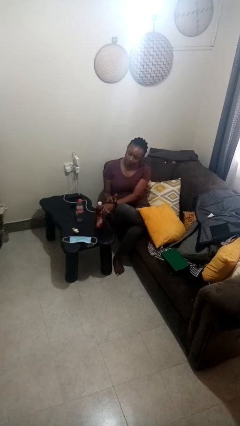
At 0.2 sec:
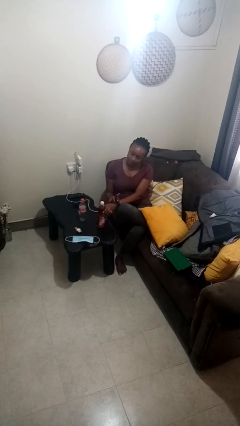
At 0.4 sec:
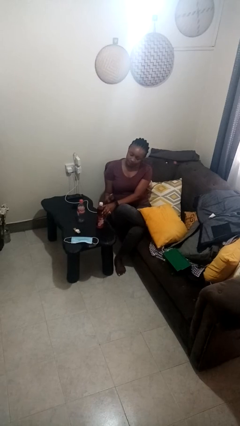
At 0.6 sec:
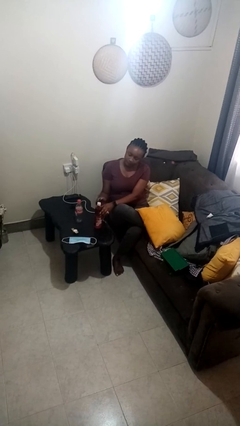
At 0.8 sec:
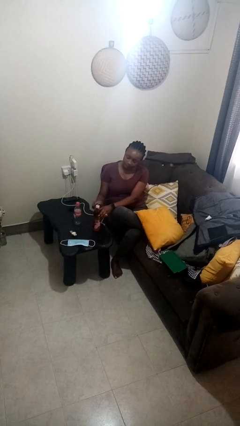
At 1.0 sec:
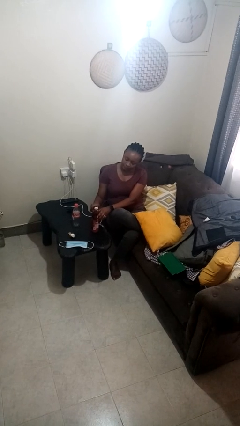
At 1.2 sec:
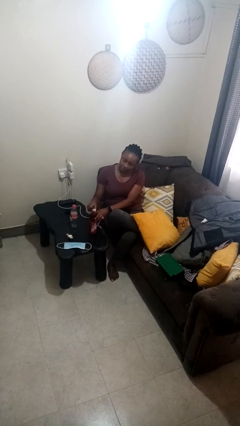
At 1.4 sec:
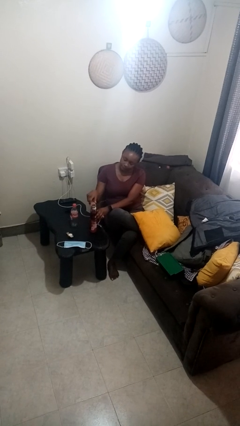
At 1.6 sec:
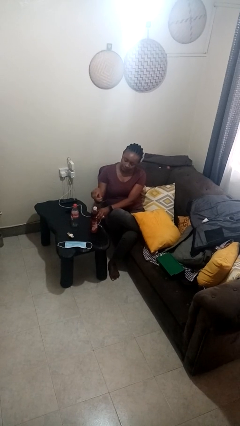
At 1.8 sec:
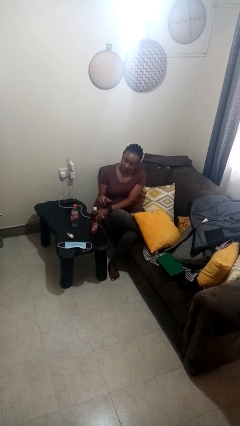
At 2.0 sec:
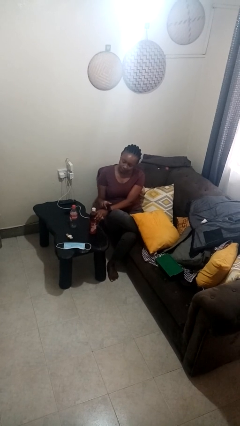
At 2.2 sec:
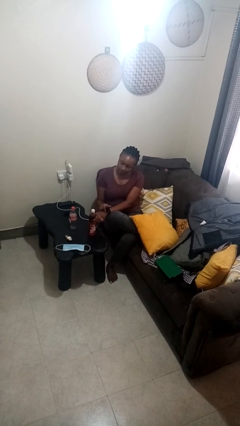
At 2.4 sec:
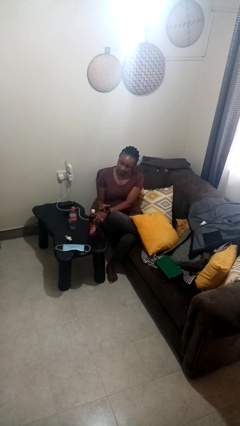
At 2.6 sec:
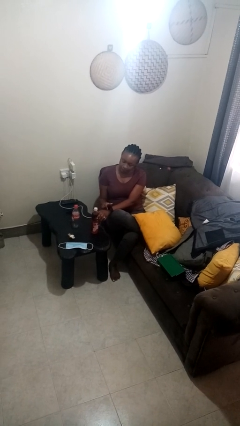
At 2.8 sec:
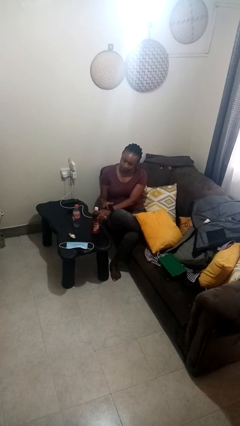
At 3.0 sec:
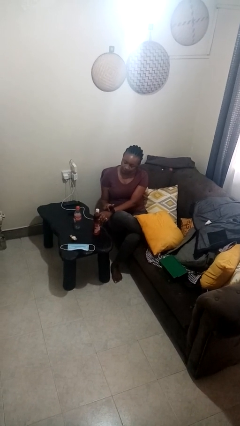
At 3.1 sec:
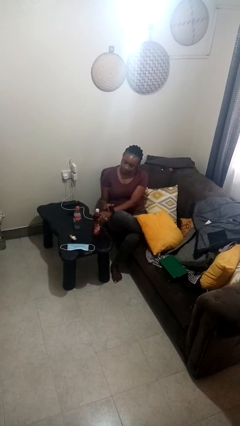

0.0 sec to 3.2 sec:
person opens can with can opener

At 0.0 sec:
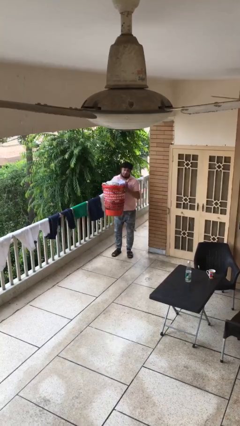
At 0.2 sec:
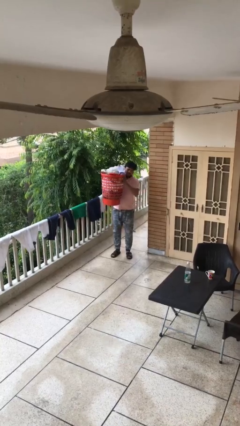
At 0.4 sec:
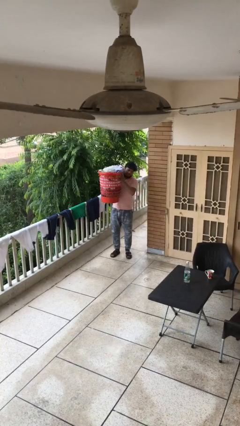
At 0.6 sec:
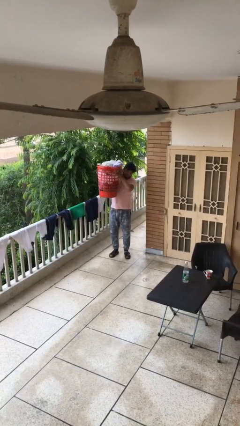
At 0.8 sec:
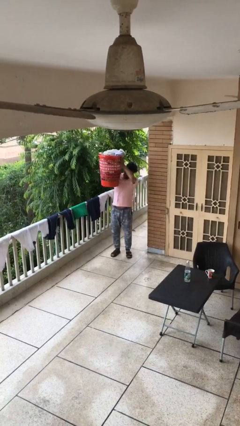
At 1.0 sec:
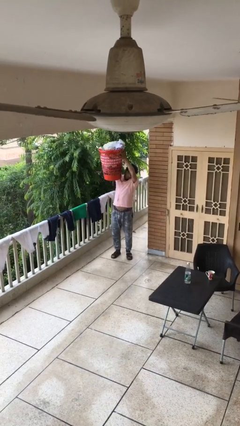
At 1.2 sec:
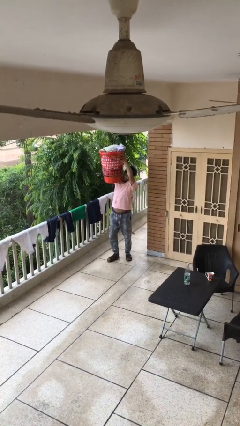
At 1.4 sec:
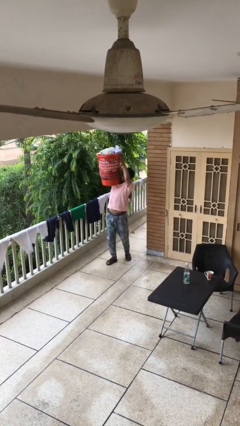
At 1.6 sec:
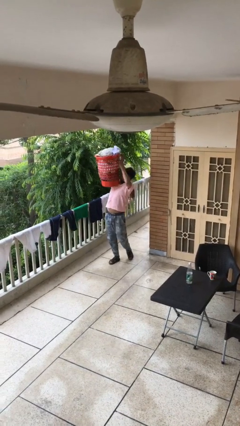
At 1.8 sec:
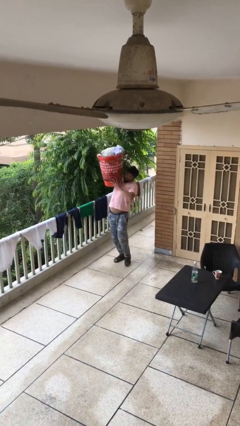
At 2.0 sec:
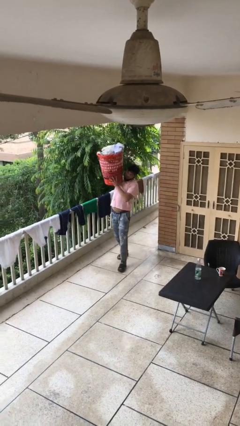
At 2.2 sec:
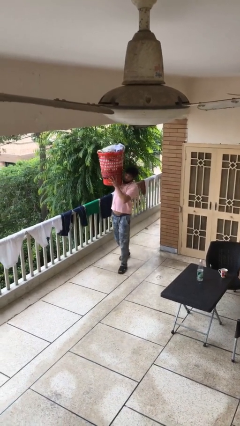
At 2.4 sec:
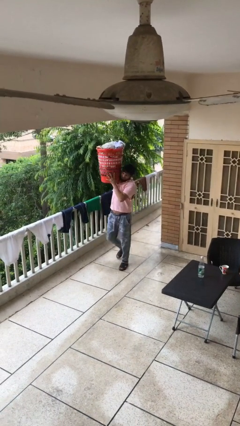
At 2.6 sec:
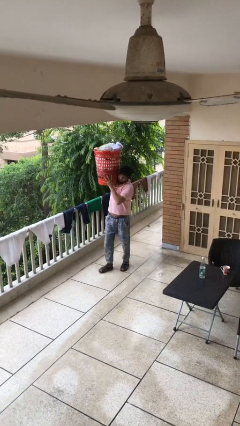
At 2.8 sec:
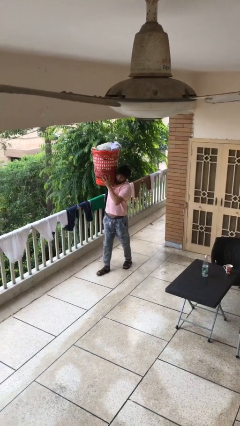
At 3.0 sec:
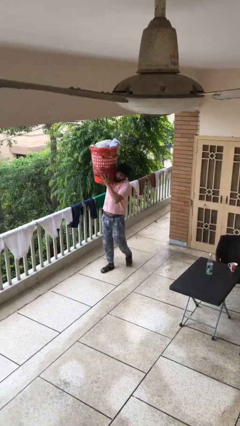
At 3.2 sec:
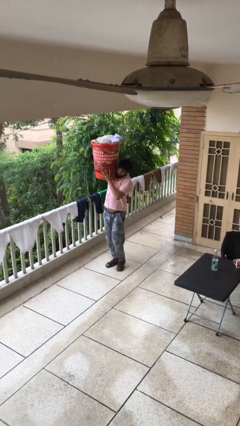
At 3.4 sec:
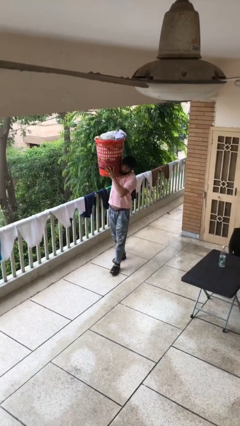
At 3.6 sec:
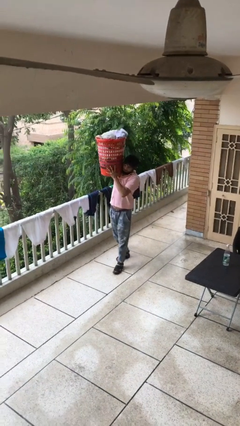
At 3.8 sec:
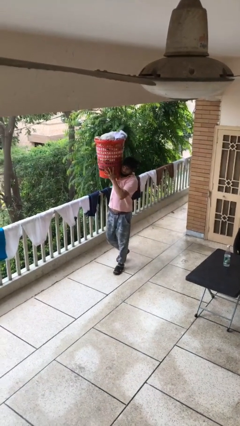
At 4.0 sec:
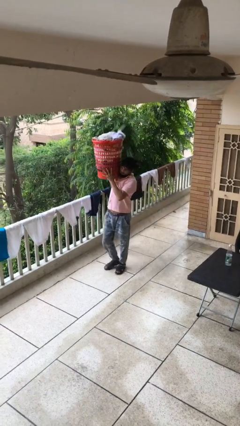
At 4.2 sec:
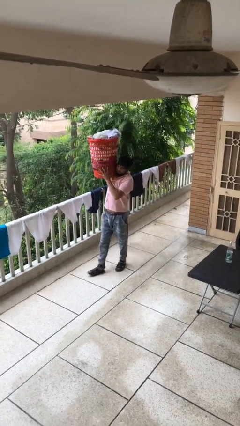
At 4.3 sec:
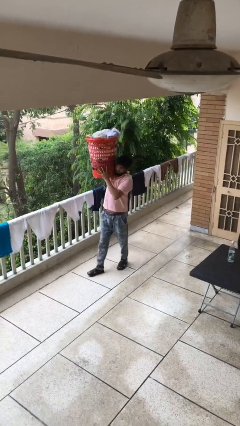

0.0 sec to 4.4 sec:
person carries heavy object

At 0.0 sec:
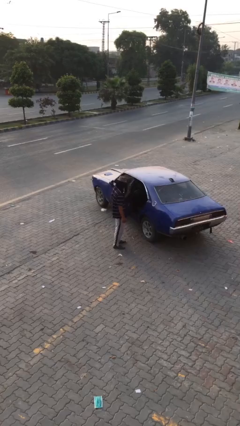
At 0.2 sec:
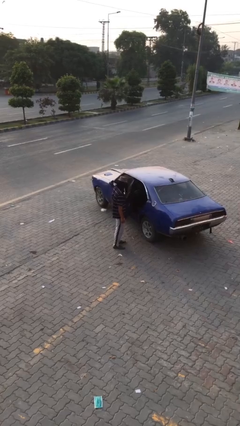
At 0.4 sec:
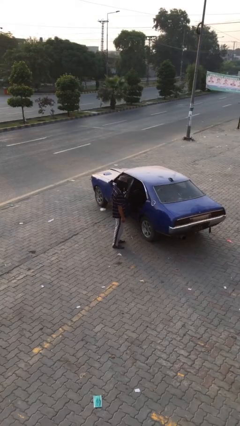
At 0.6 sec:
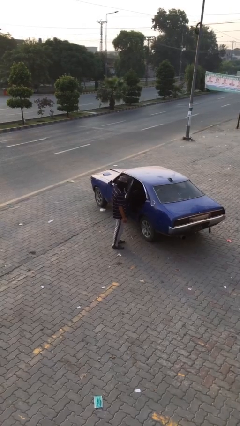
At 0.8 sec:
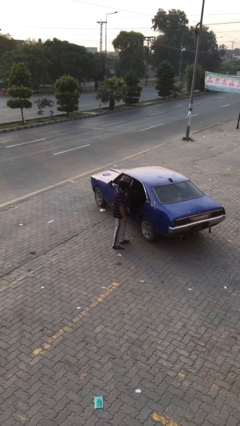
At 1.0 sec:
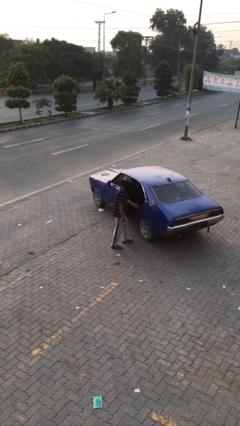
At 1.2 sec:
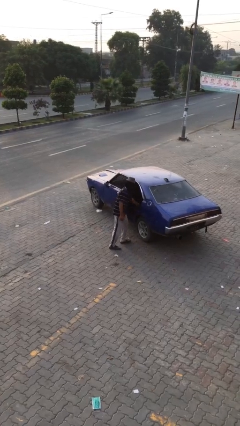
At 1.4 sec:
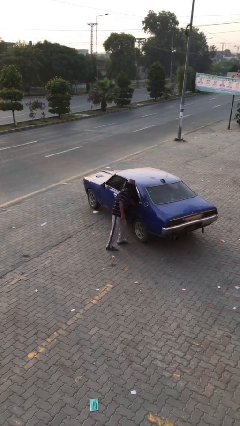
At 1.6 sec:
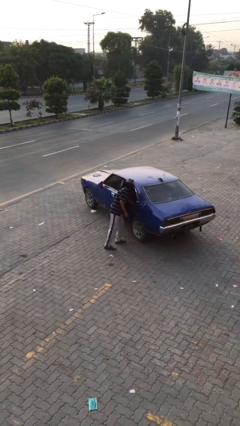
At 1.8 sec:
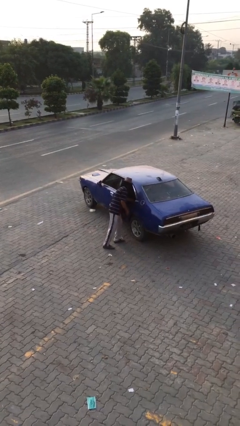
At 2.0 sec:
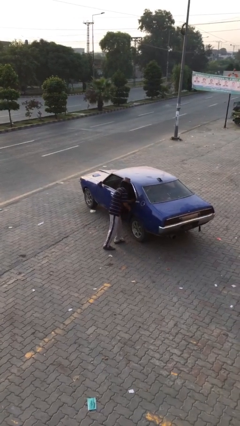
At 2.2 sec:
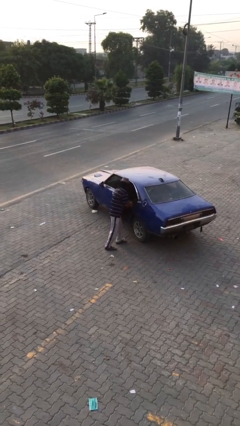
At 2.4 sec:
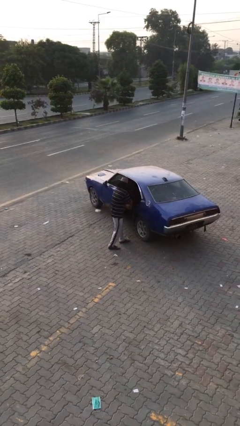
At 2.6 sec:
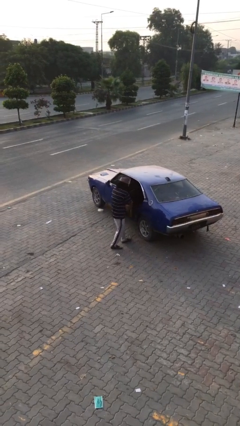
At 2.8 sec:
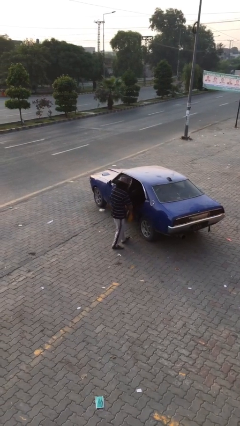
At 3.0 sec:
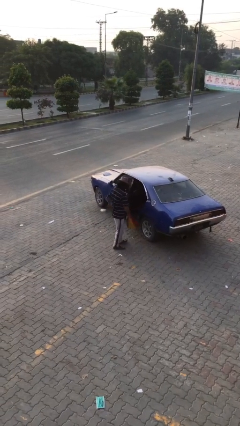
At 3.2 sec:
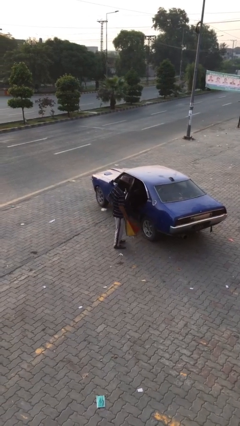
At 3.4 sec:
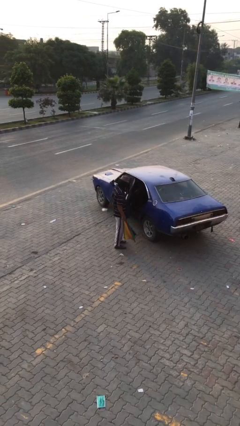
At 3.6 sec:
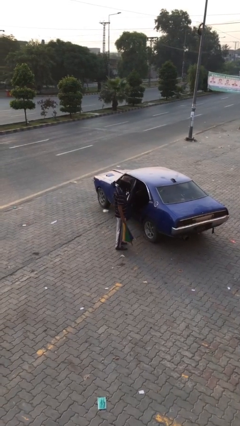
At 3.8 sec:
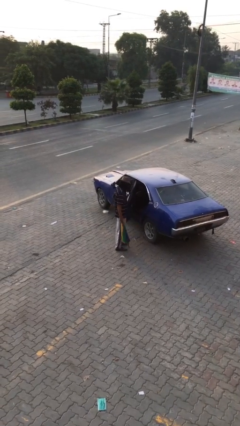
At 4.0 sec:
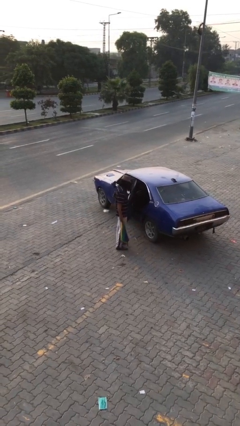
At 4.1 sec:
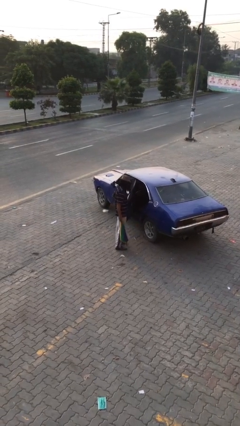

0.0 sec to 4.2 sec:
person unloads car

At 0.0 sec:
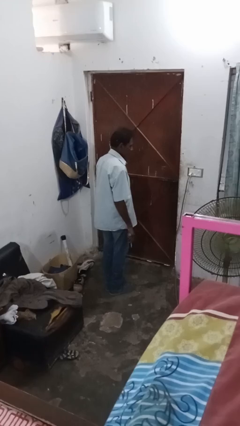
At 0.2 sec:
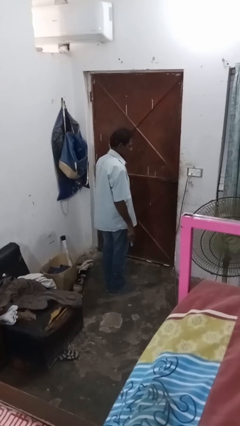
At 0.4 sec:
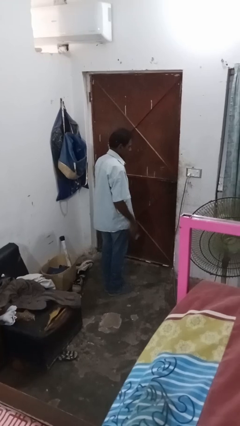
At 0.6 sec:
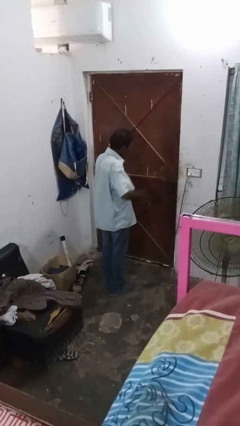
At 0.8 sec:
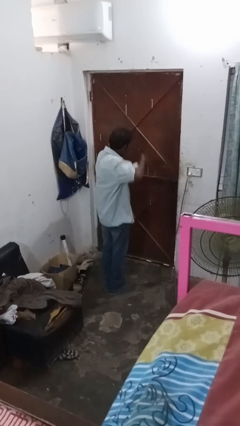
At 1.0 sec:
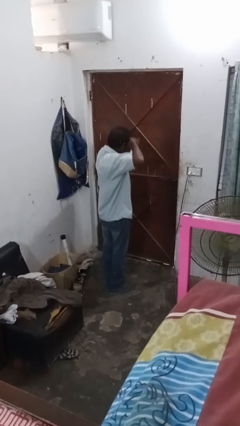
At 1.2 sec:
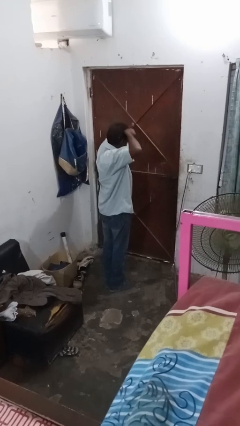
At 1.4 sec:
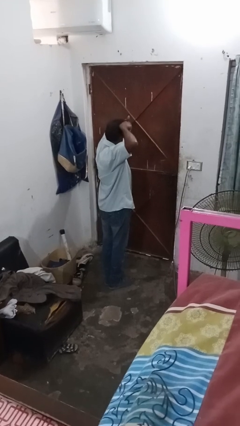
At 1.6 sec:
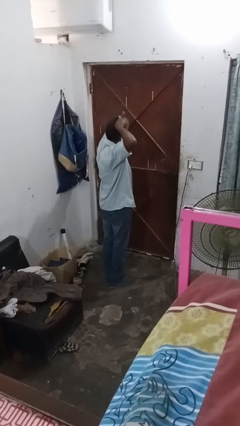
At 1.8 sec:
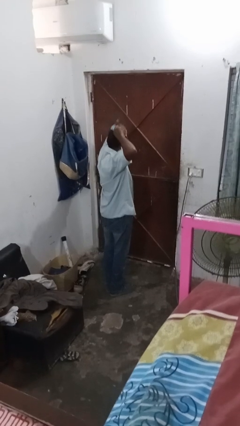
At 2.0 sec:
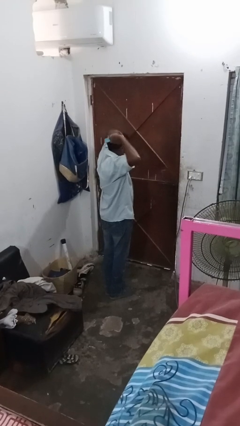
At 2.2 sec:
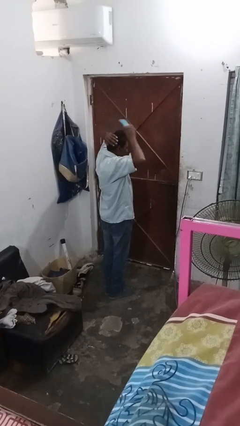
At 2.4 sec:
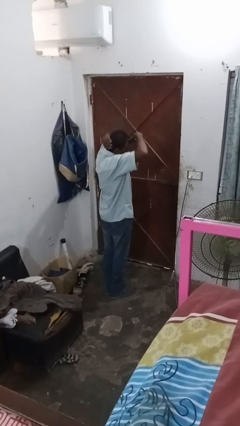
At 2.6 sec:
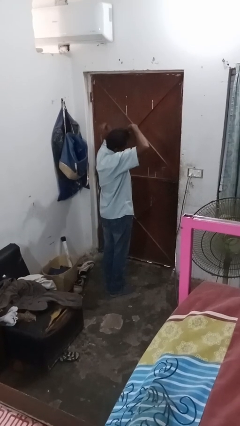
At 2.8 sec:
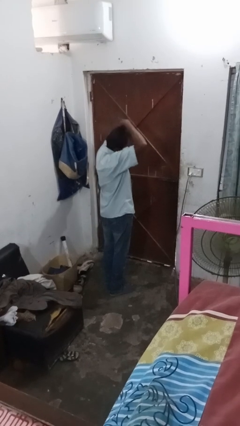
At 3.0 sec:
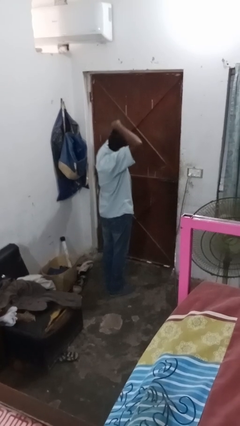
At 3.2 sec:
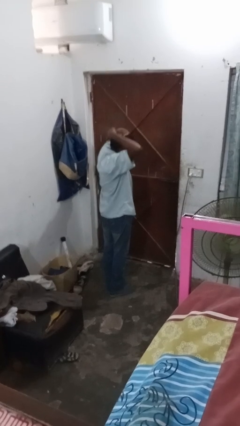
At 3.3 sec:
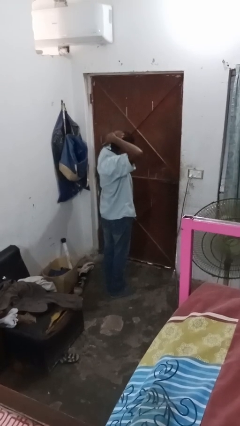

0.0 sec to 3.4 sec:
person brushes hair

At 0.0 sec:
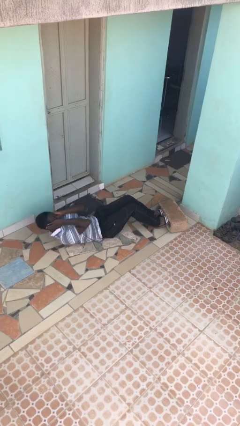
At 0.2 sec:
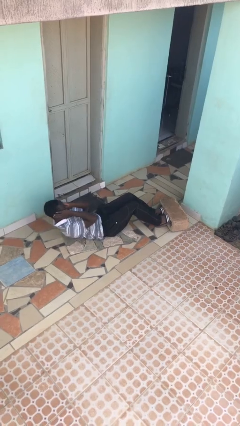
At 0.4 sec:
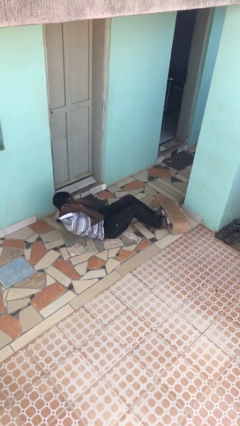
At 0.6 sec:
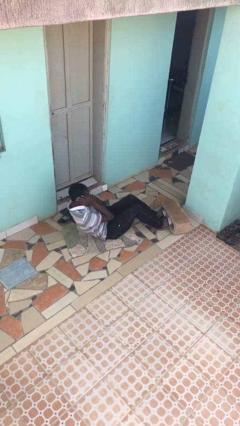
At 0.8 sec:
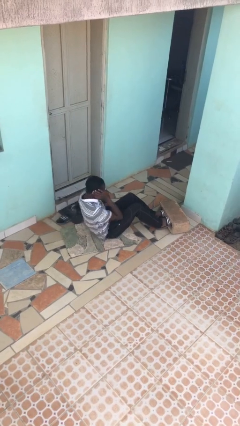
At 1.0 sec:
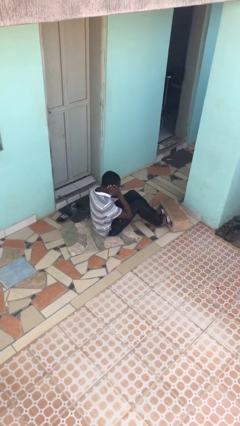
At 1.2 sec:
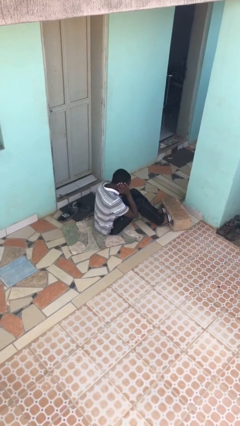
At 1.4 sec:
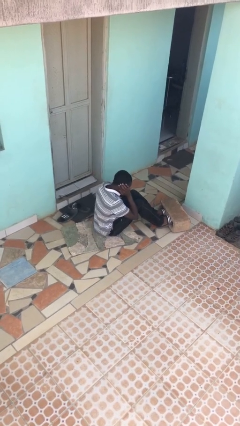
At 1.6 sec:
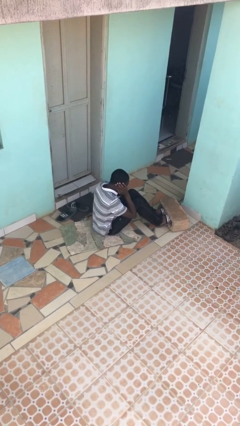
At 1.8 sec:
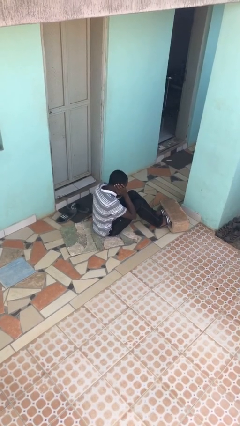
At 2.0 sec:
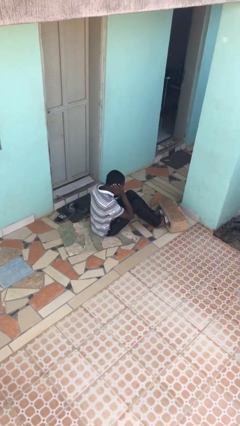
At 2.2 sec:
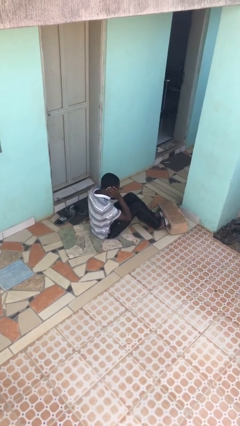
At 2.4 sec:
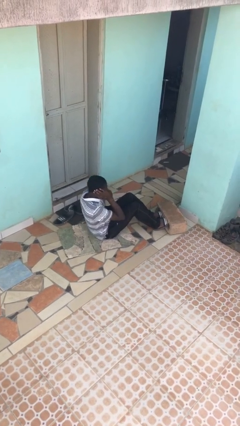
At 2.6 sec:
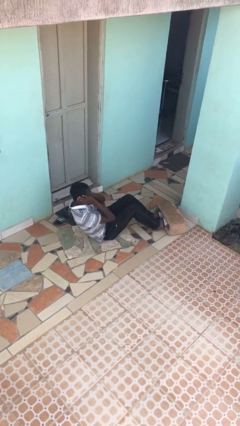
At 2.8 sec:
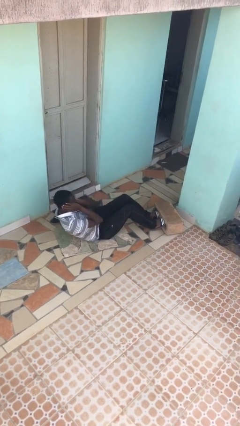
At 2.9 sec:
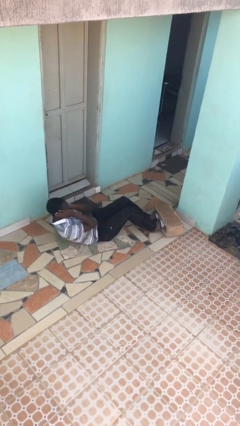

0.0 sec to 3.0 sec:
person exercises with situp
